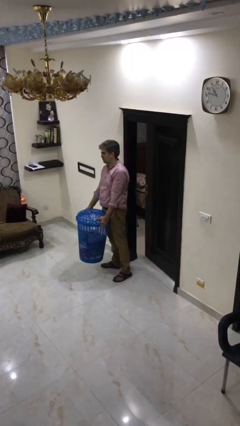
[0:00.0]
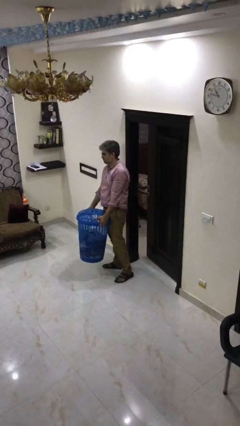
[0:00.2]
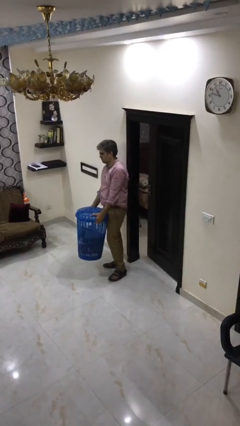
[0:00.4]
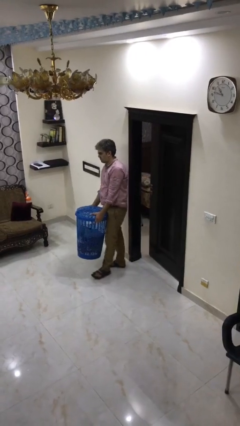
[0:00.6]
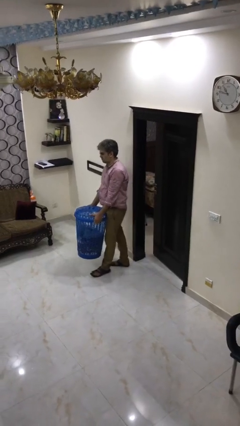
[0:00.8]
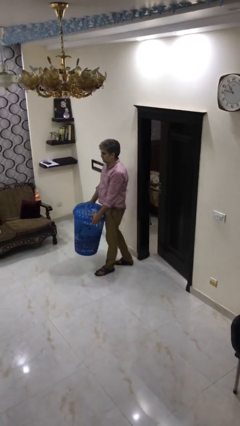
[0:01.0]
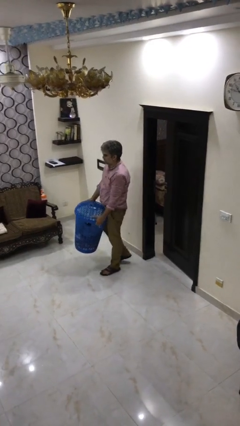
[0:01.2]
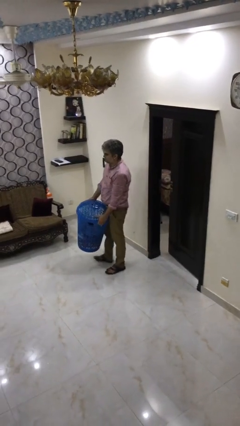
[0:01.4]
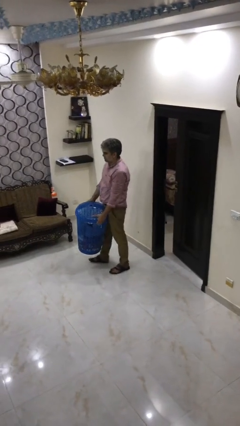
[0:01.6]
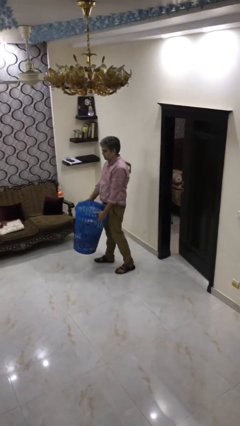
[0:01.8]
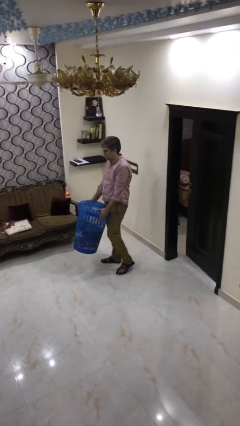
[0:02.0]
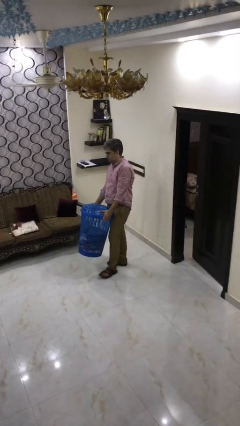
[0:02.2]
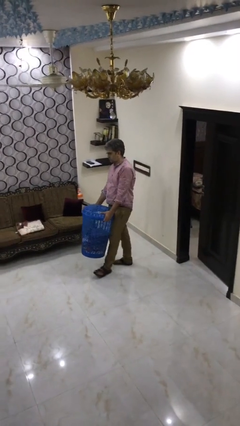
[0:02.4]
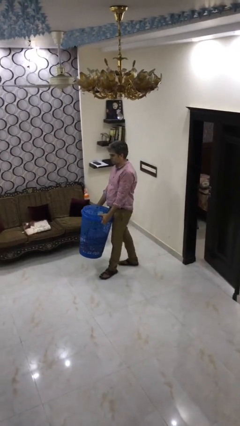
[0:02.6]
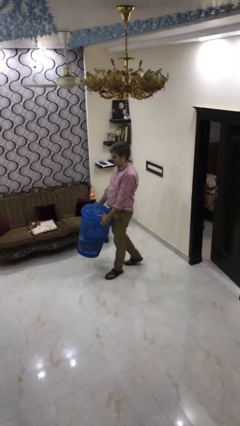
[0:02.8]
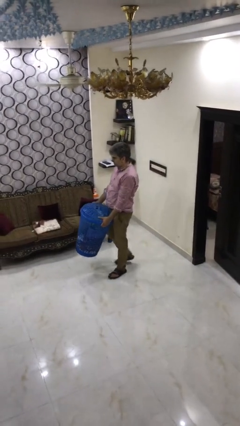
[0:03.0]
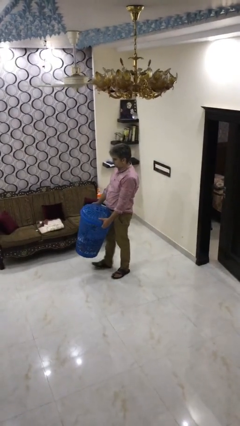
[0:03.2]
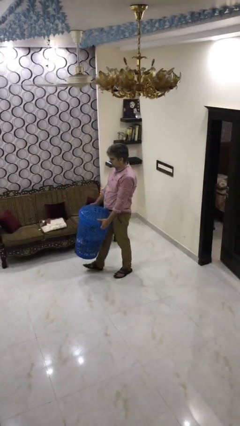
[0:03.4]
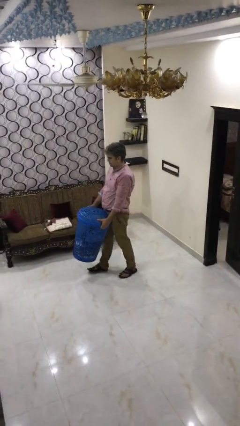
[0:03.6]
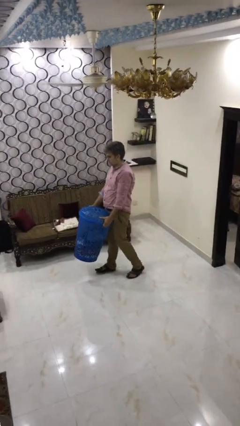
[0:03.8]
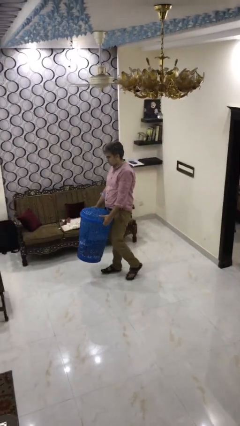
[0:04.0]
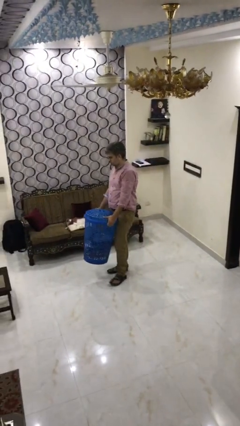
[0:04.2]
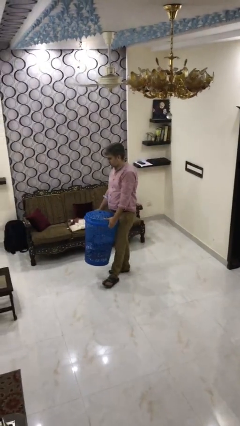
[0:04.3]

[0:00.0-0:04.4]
person carries heavy object

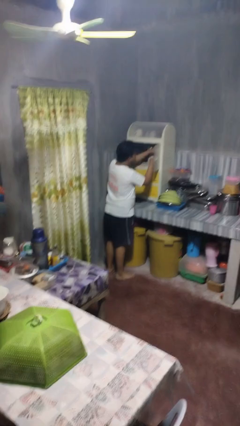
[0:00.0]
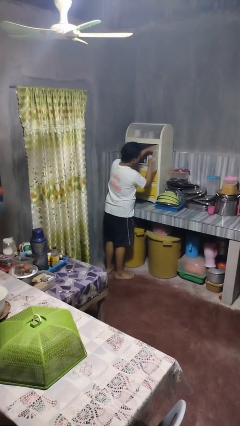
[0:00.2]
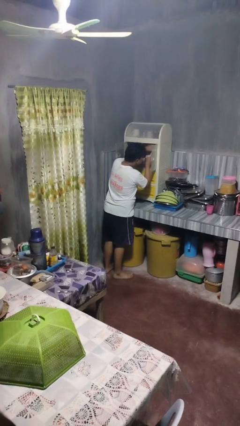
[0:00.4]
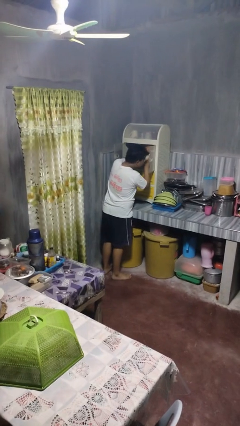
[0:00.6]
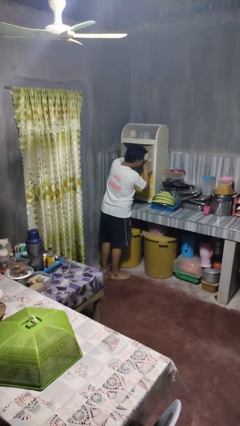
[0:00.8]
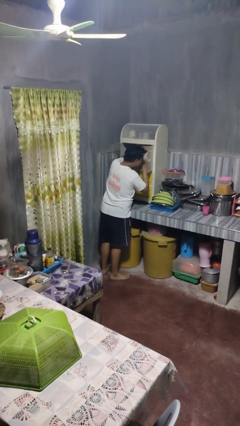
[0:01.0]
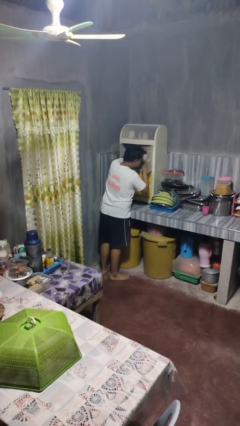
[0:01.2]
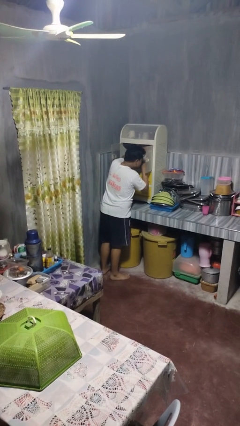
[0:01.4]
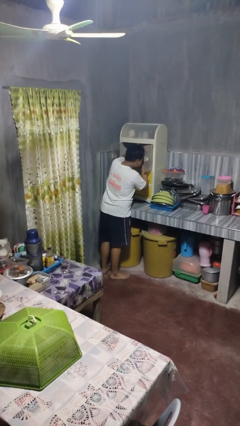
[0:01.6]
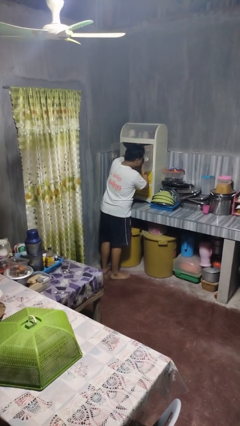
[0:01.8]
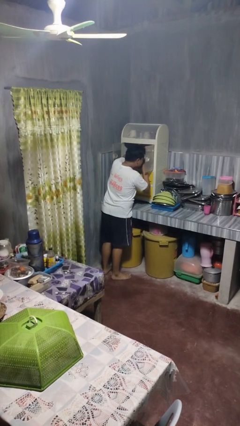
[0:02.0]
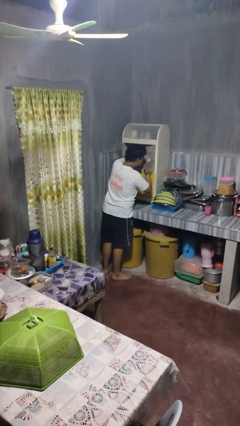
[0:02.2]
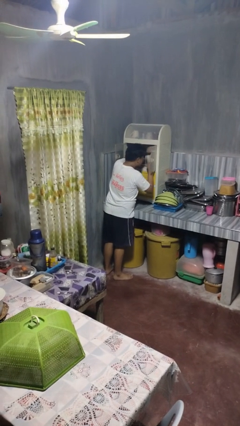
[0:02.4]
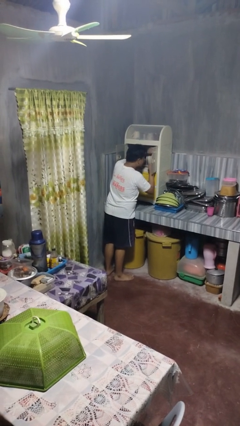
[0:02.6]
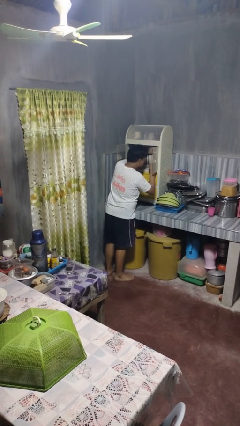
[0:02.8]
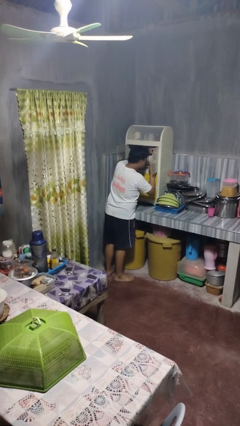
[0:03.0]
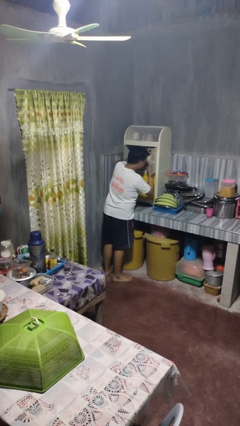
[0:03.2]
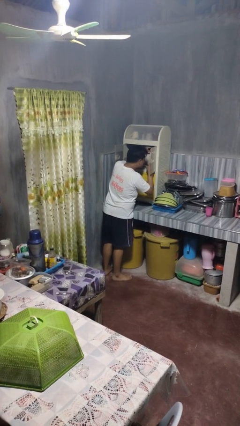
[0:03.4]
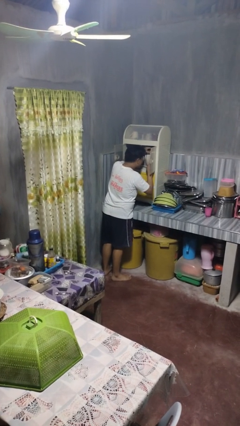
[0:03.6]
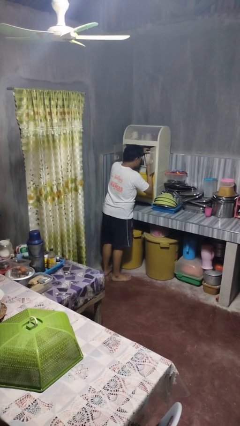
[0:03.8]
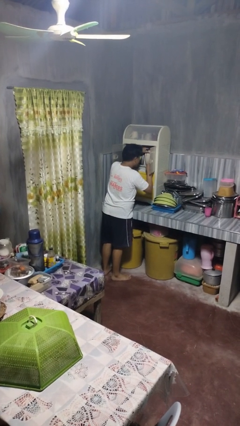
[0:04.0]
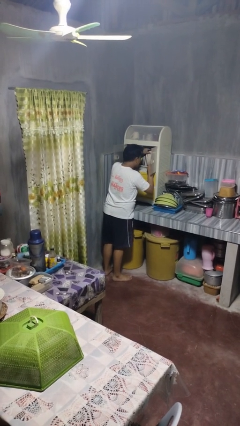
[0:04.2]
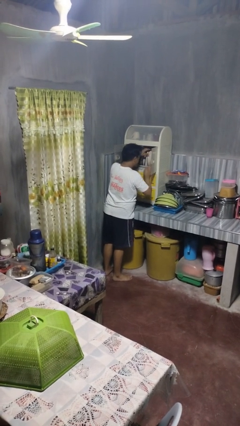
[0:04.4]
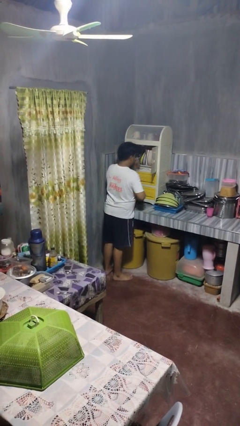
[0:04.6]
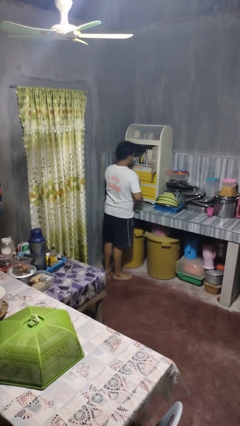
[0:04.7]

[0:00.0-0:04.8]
person searches in cabinet

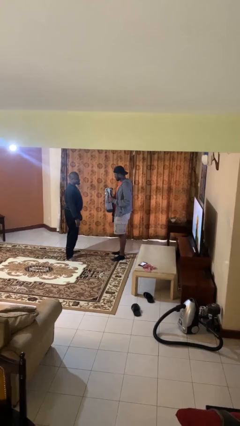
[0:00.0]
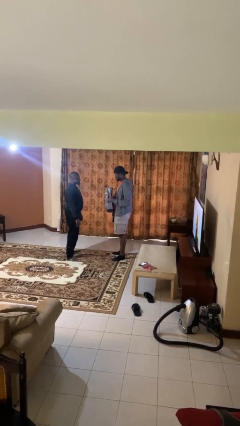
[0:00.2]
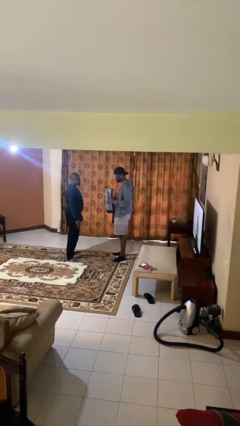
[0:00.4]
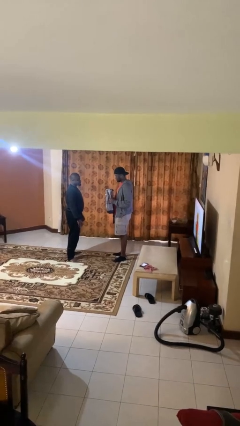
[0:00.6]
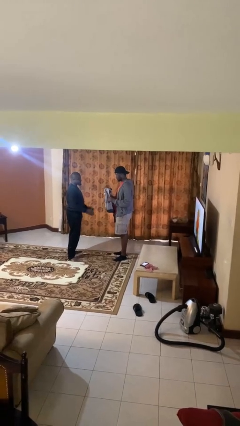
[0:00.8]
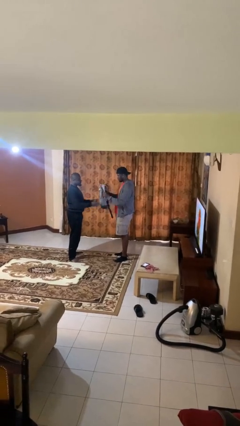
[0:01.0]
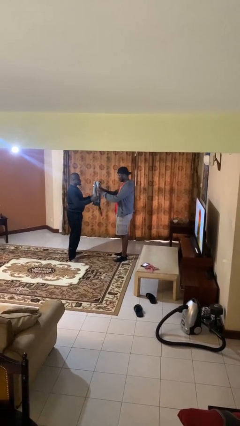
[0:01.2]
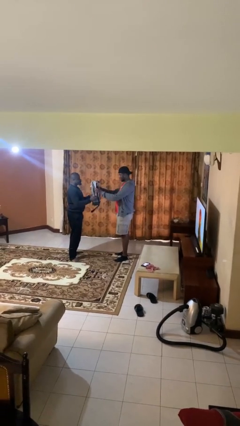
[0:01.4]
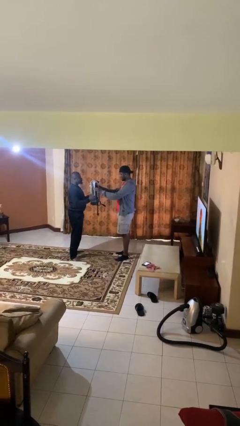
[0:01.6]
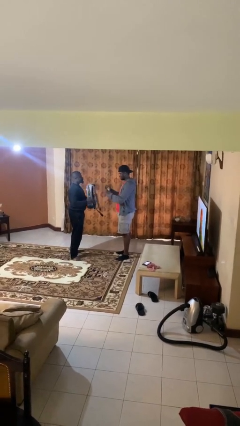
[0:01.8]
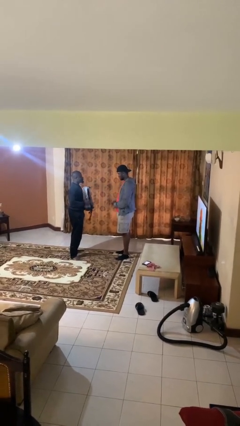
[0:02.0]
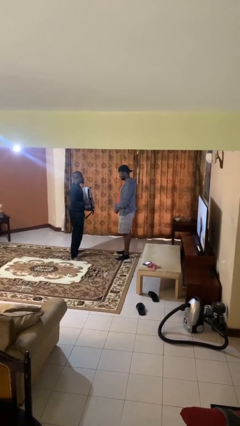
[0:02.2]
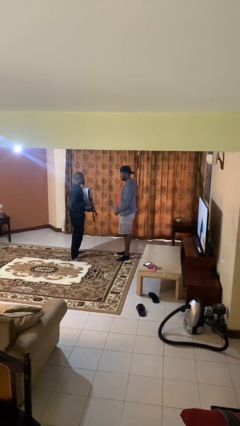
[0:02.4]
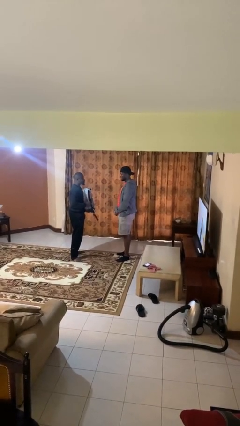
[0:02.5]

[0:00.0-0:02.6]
person transfers object to person

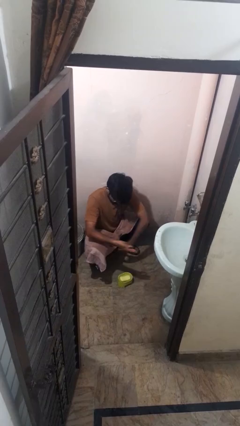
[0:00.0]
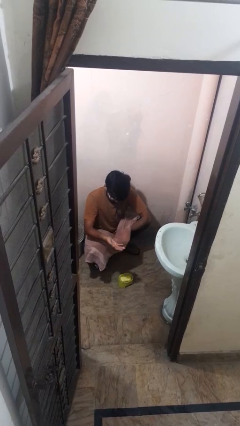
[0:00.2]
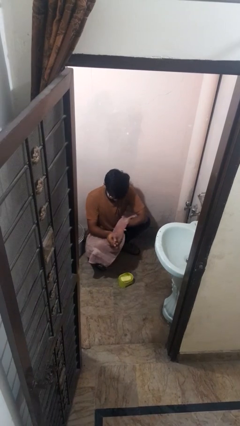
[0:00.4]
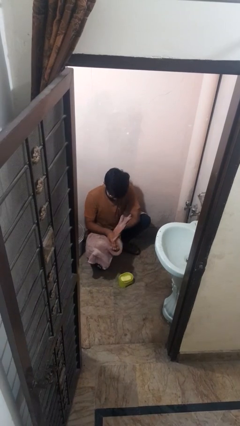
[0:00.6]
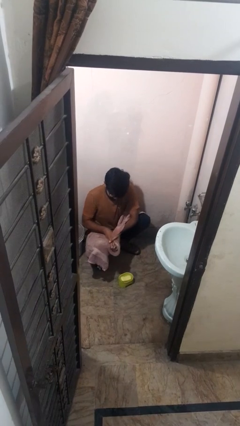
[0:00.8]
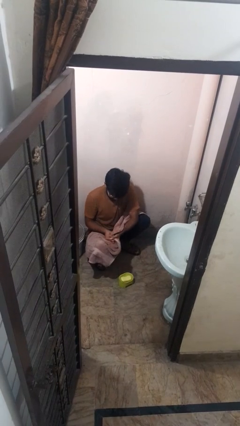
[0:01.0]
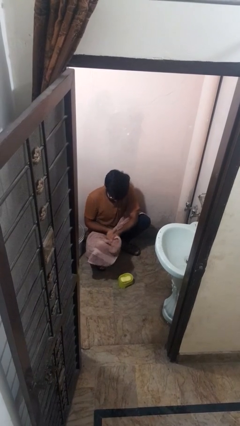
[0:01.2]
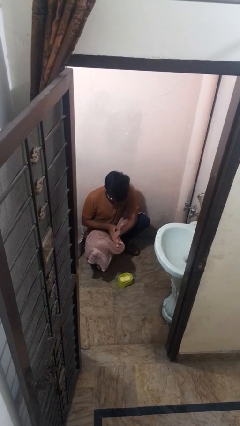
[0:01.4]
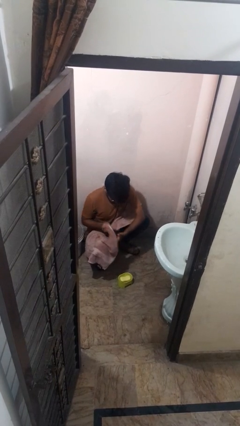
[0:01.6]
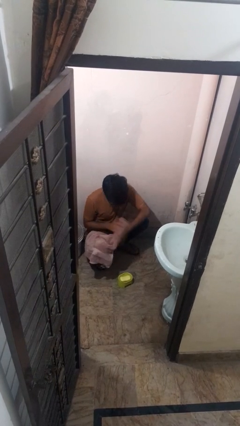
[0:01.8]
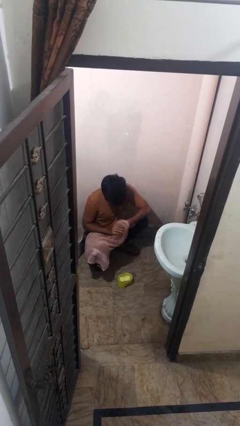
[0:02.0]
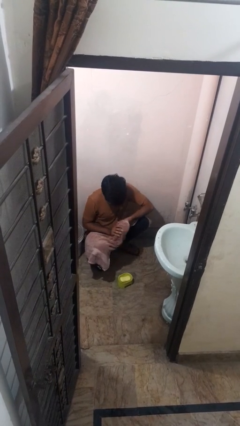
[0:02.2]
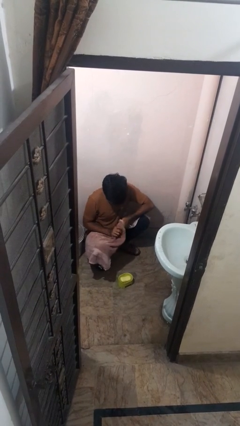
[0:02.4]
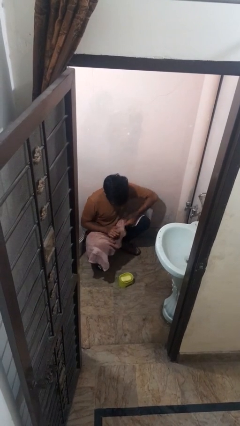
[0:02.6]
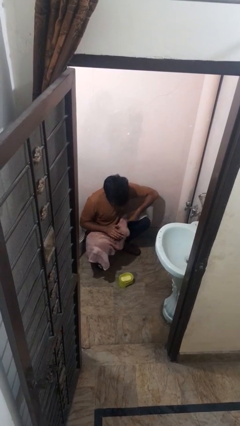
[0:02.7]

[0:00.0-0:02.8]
person dries hands with towel

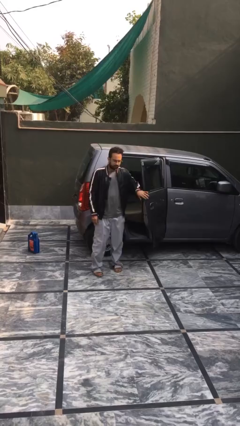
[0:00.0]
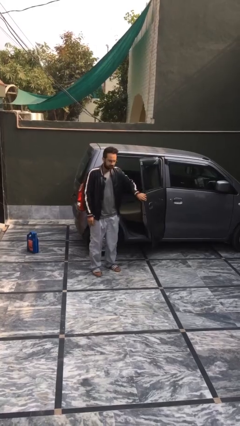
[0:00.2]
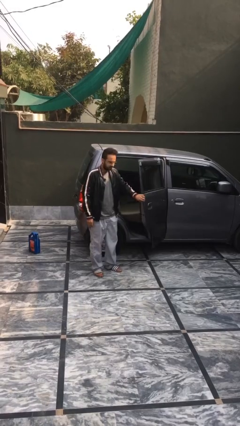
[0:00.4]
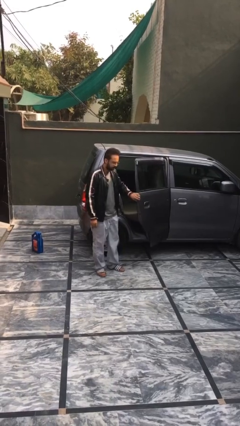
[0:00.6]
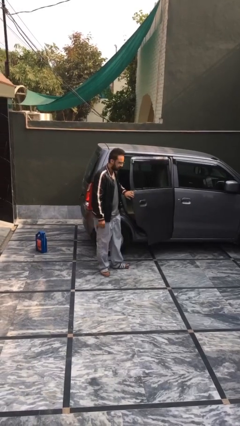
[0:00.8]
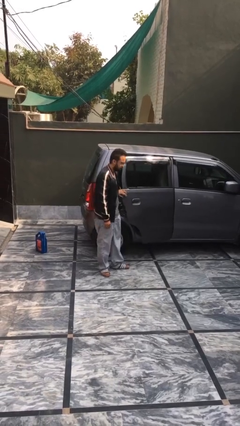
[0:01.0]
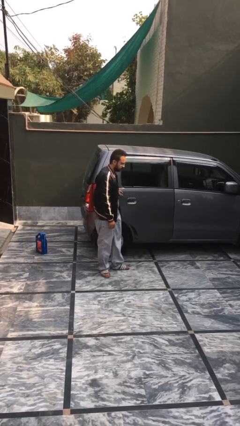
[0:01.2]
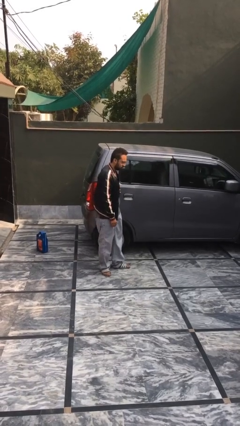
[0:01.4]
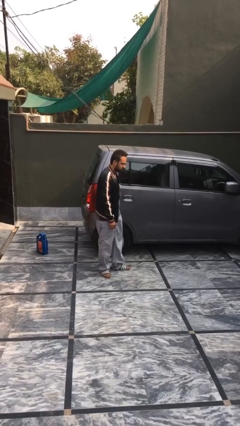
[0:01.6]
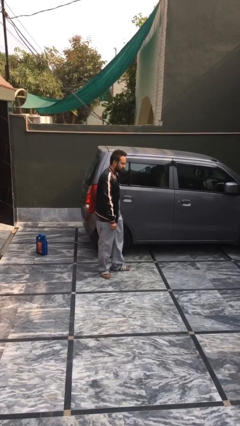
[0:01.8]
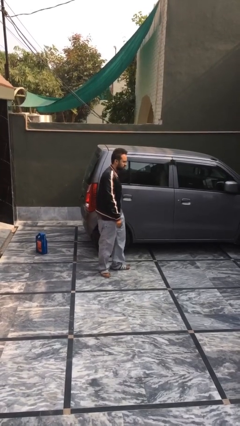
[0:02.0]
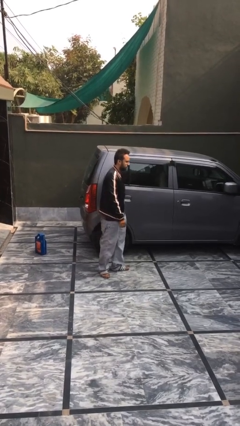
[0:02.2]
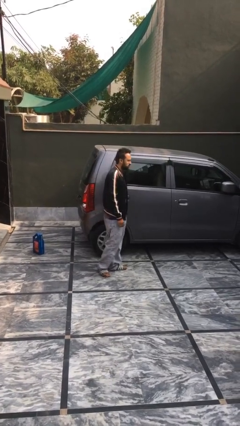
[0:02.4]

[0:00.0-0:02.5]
person closes car door

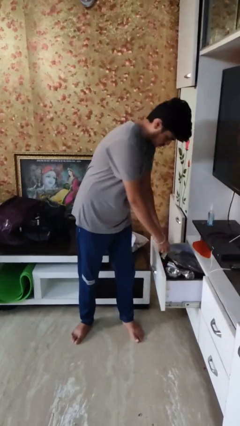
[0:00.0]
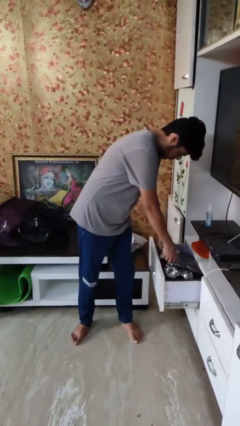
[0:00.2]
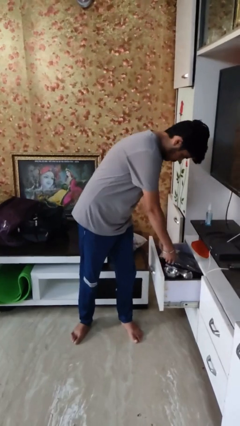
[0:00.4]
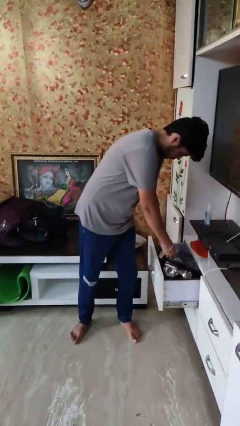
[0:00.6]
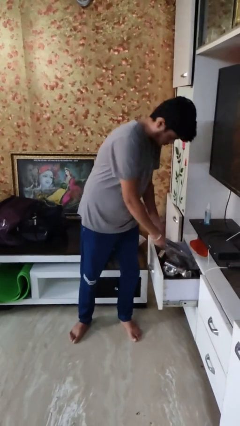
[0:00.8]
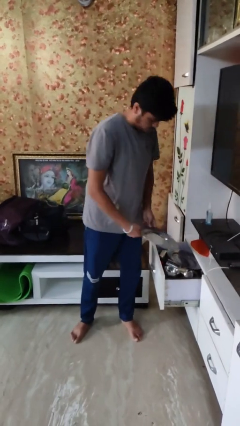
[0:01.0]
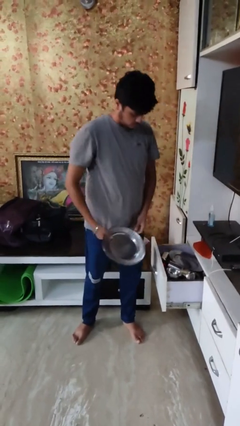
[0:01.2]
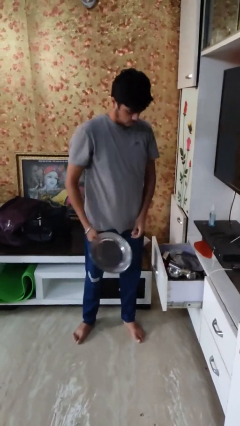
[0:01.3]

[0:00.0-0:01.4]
person takes object from kitchen drawer
